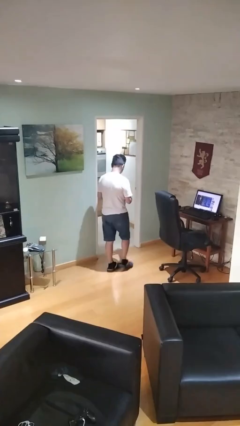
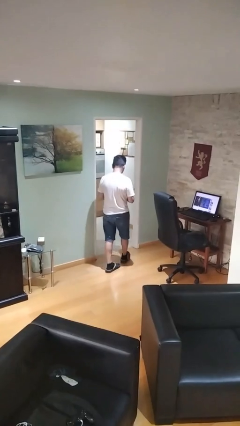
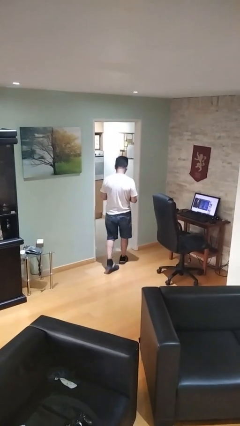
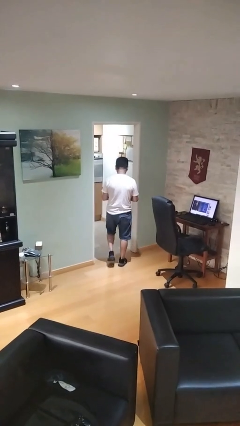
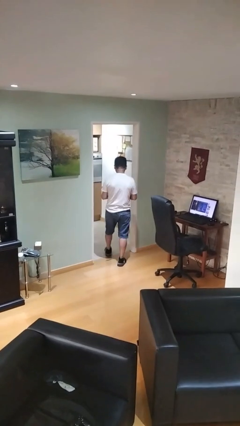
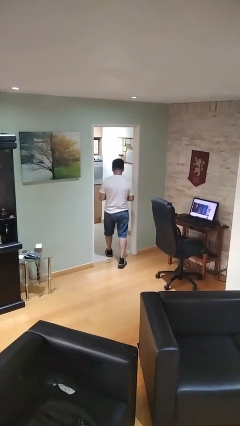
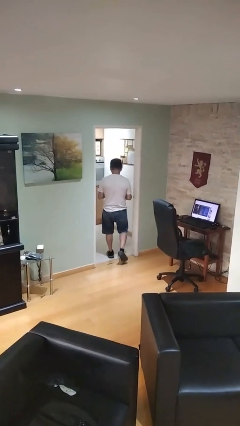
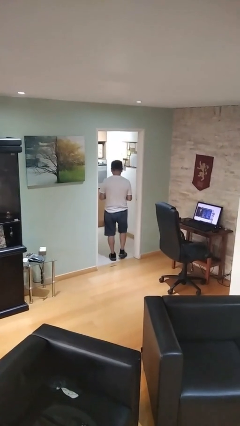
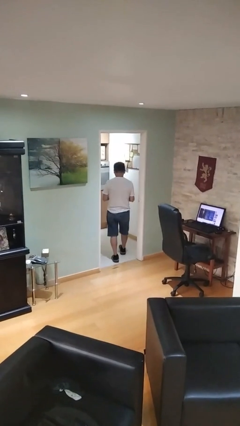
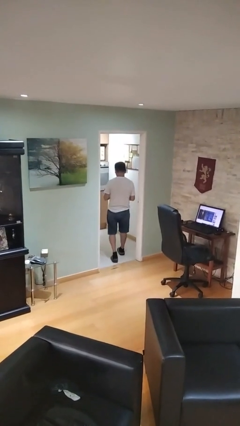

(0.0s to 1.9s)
person exits scene through structure

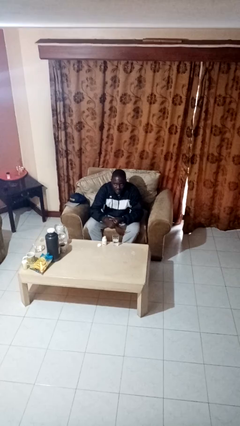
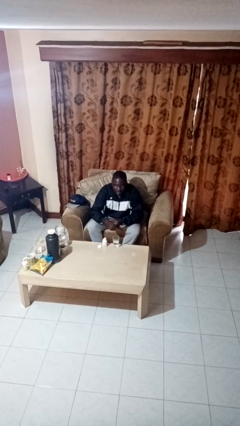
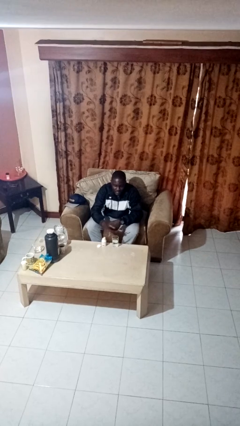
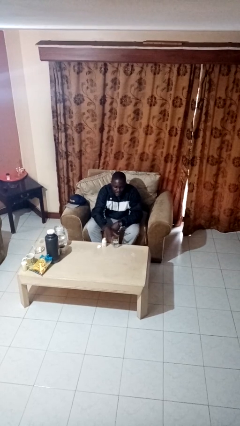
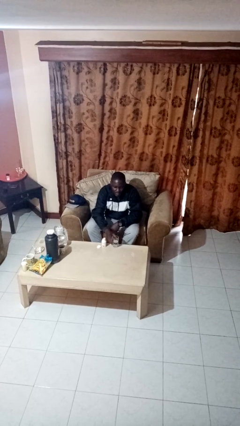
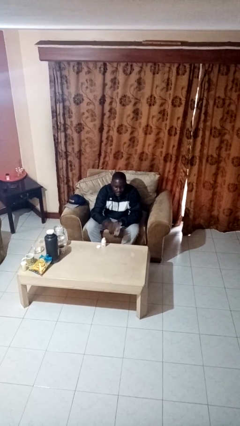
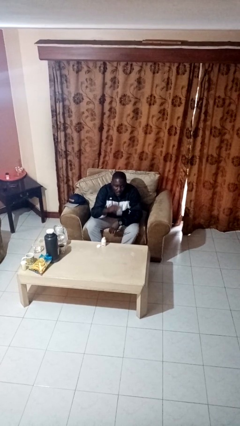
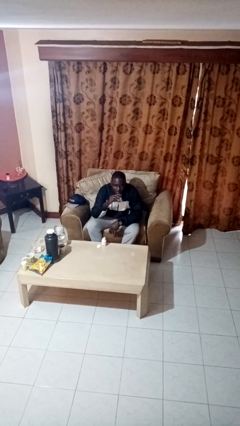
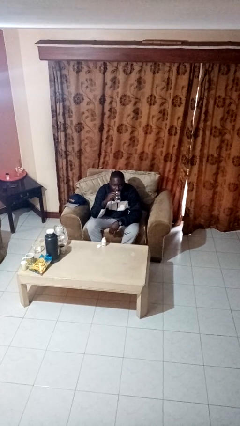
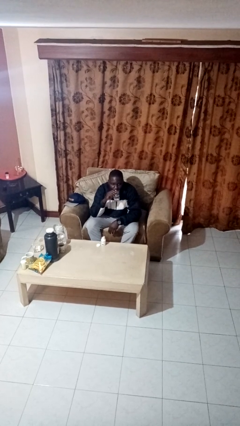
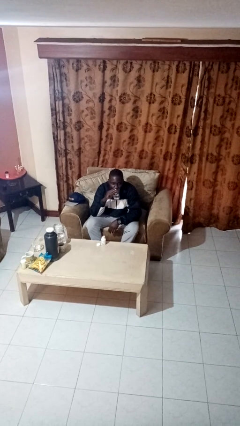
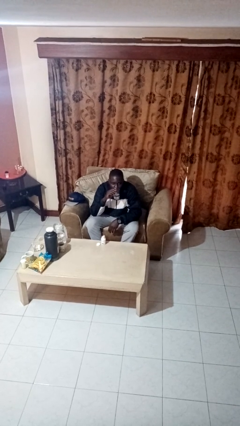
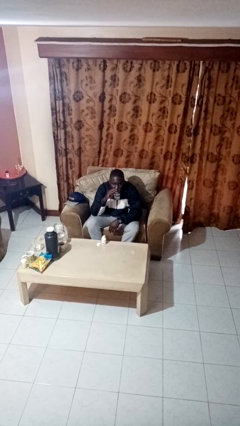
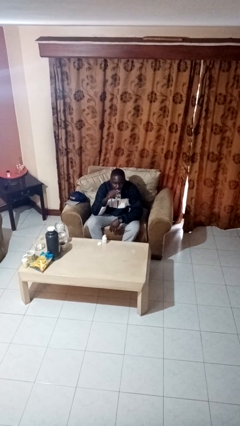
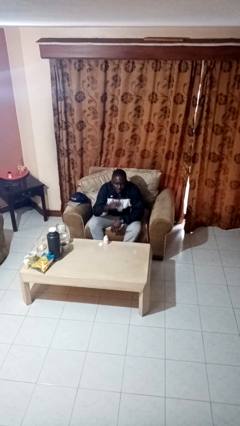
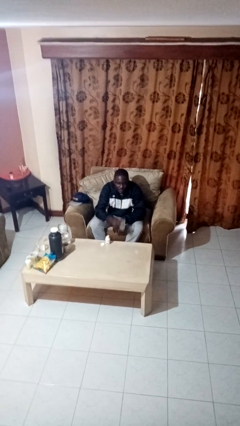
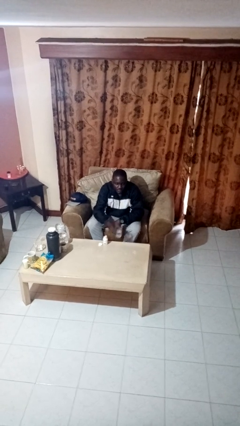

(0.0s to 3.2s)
person drinks from cup

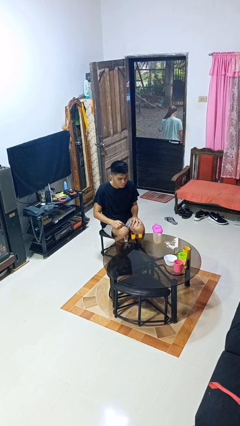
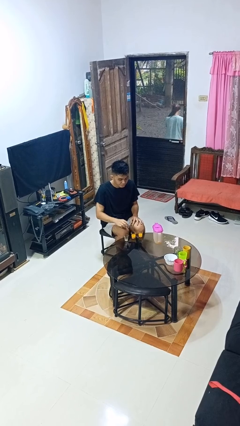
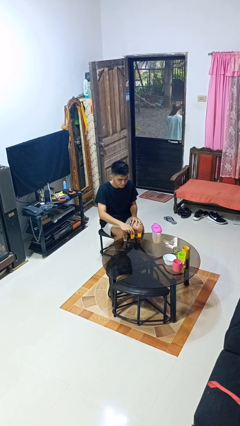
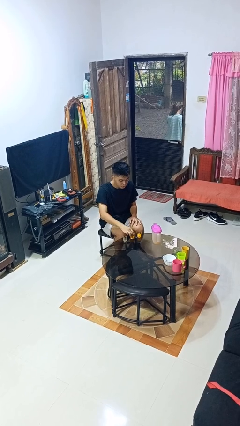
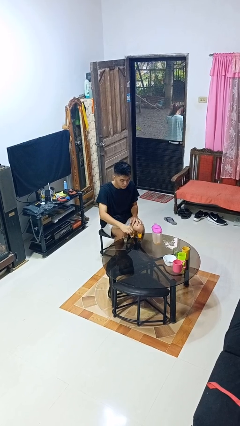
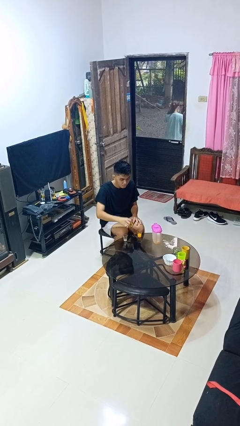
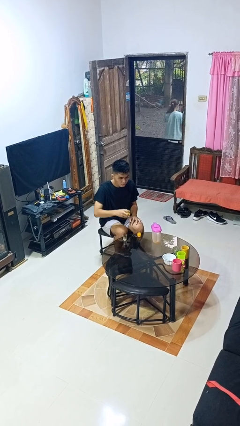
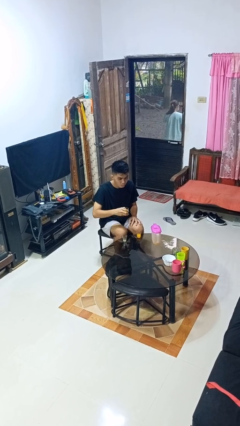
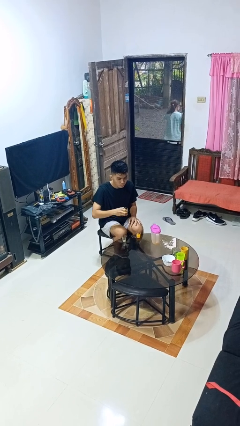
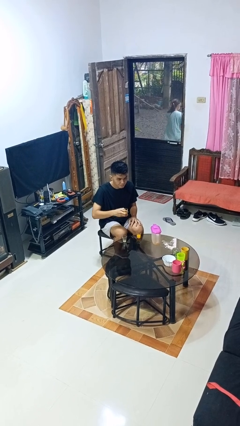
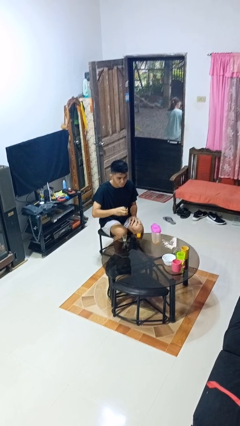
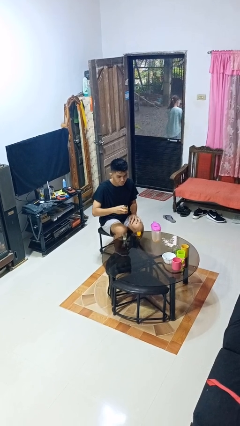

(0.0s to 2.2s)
person picks up object from table

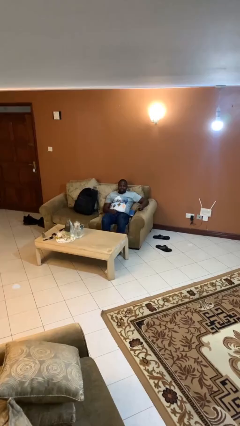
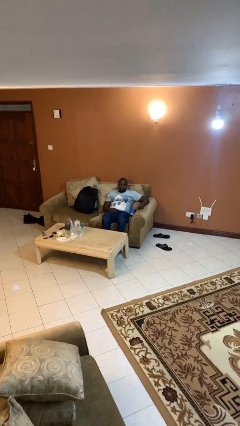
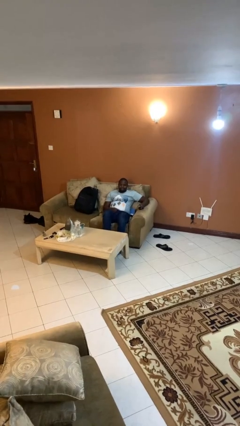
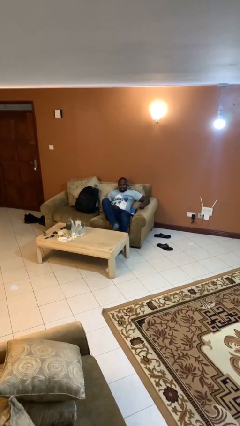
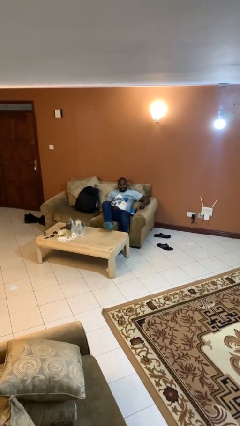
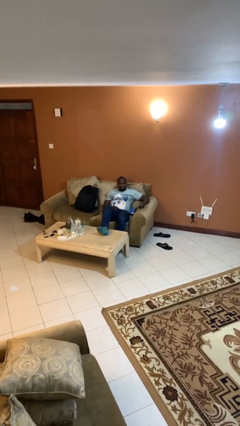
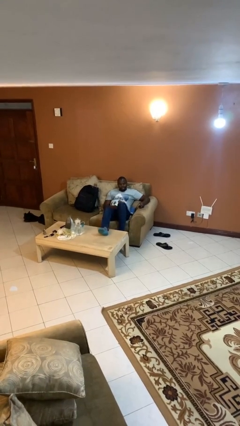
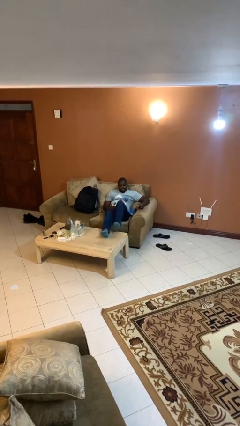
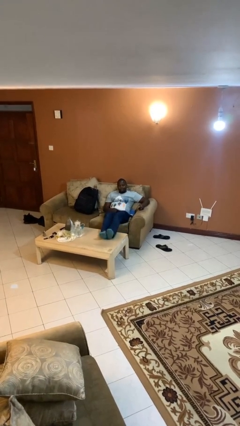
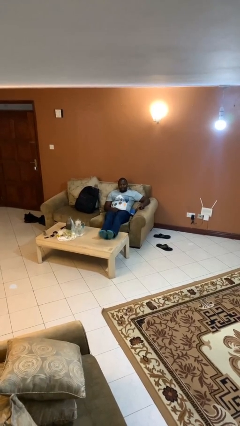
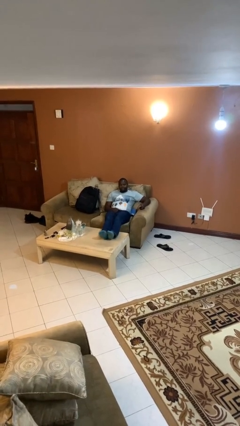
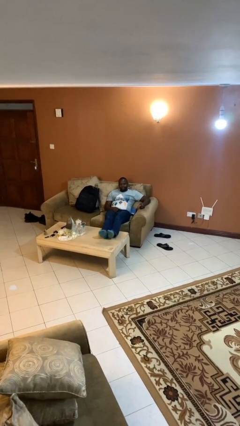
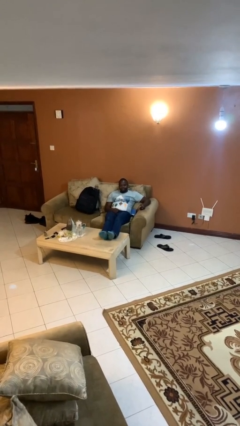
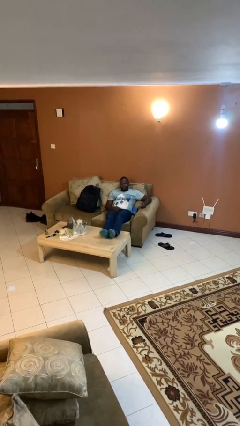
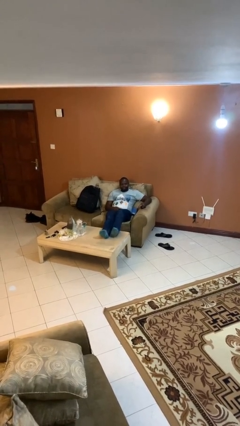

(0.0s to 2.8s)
person puts feet up

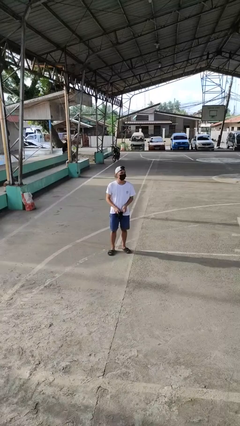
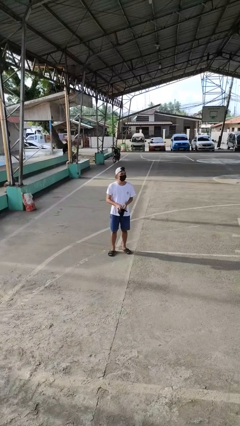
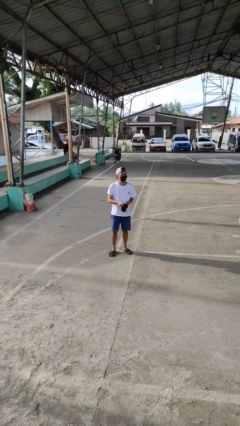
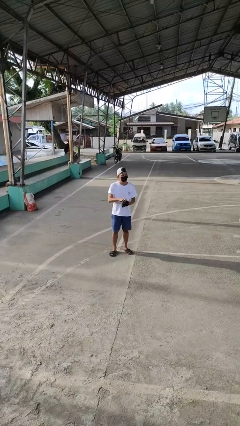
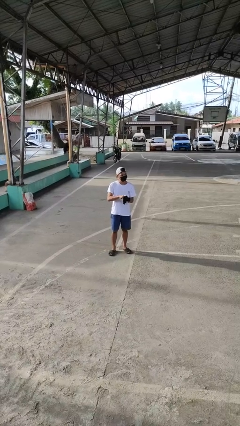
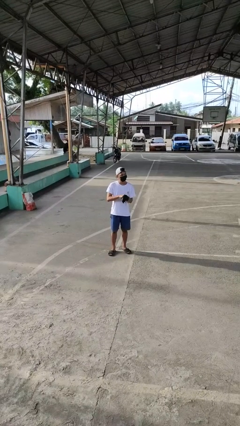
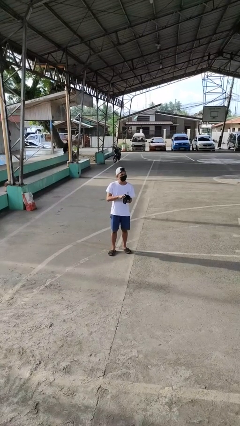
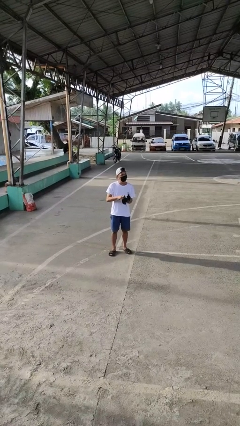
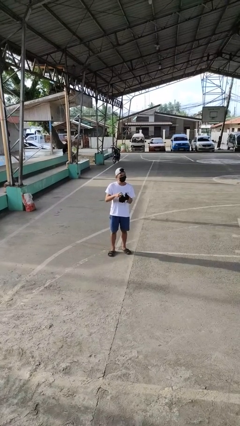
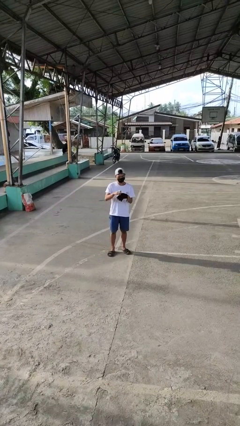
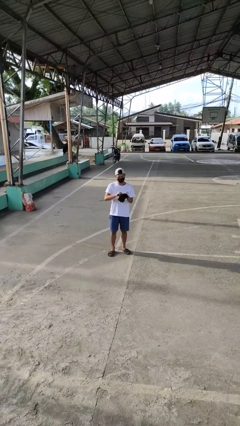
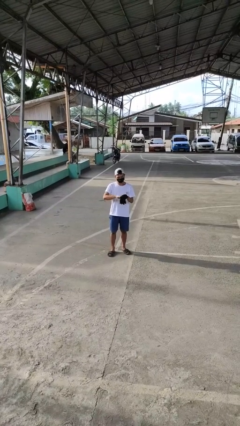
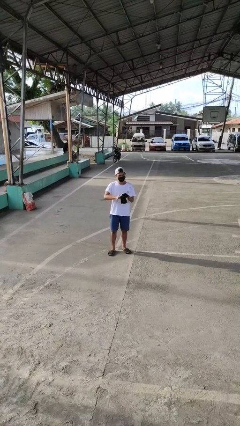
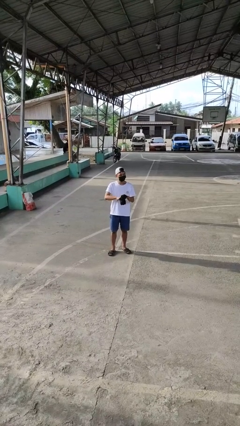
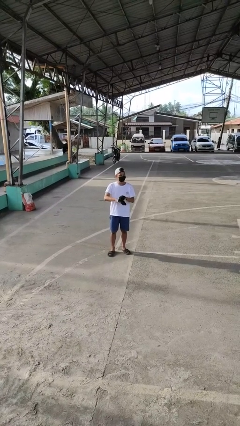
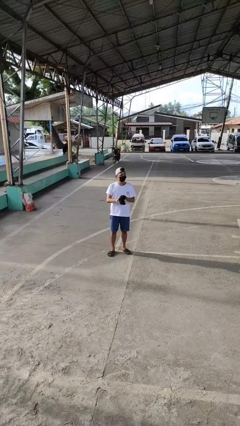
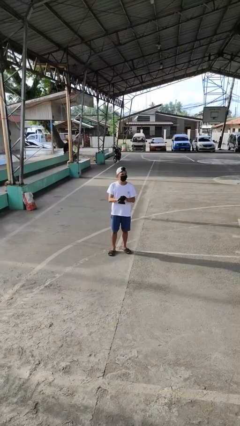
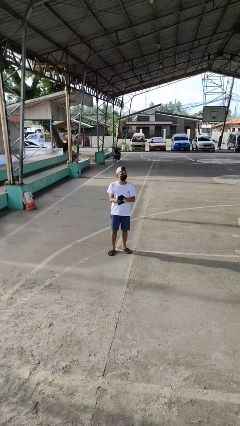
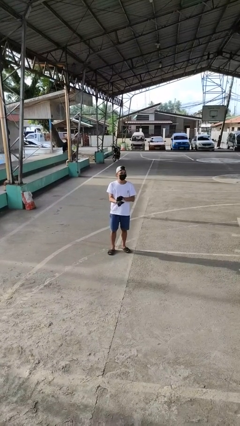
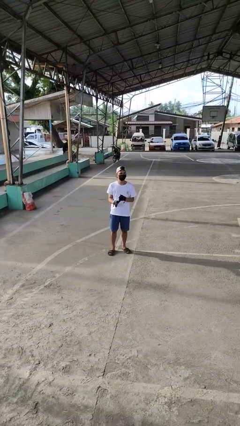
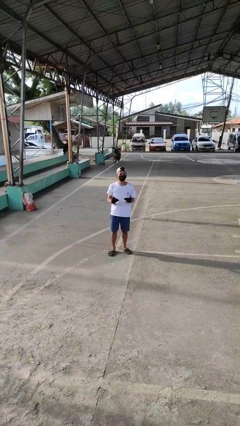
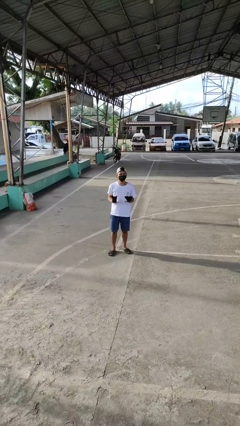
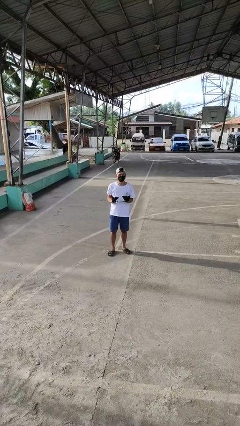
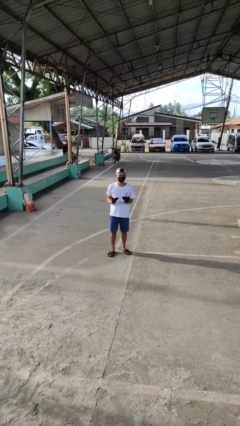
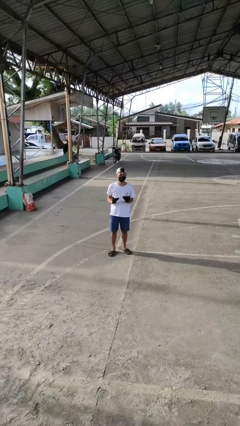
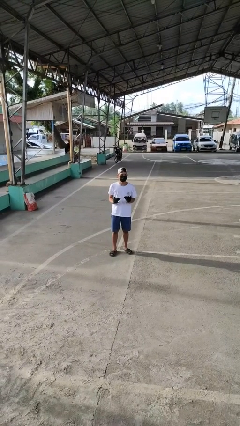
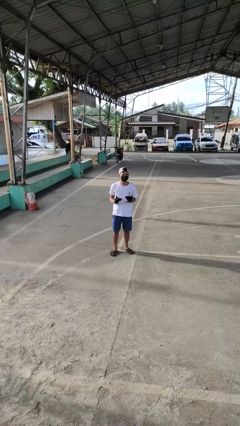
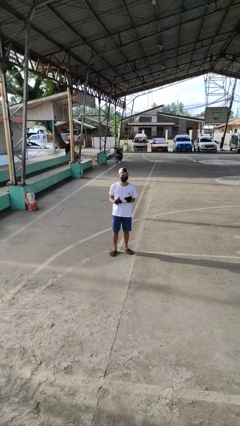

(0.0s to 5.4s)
person puts on gloves

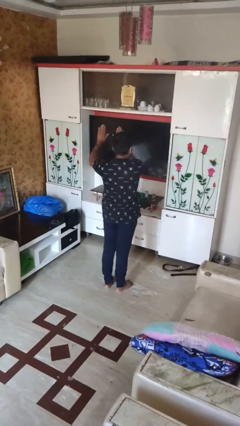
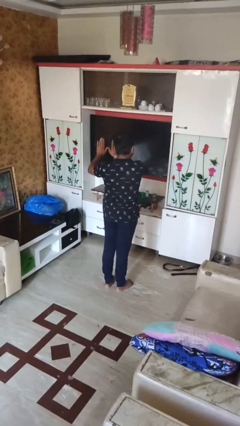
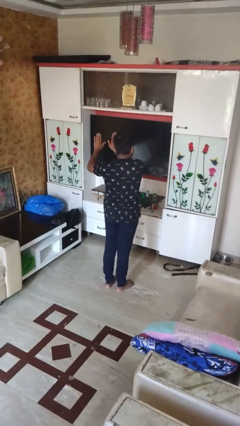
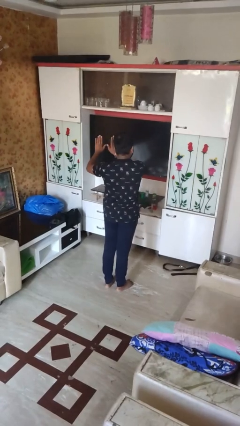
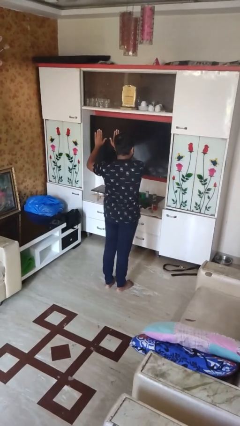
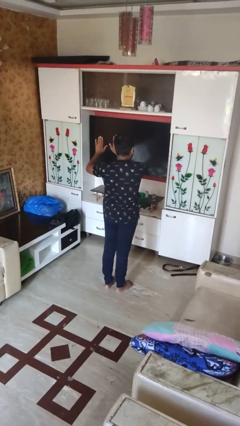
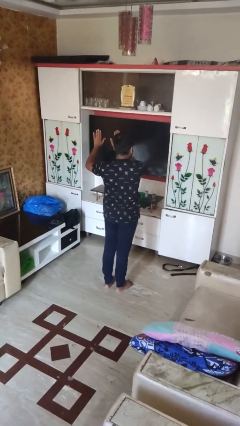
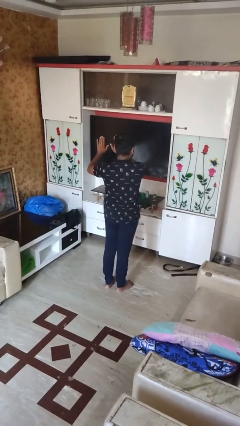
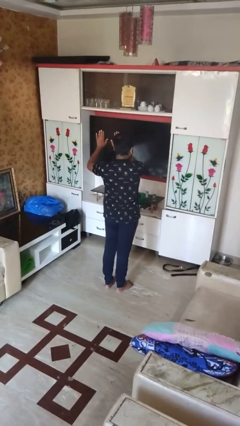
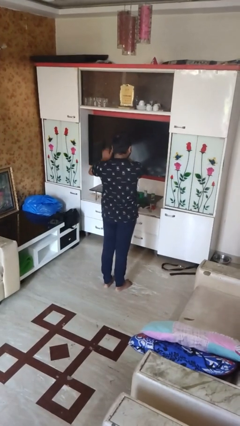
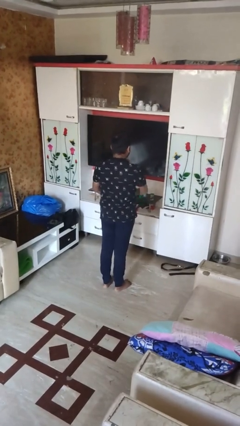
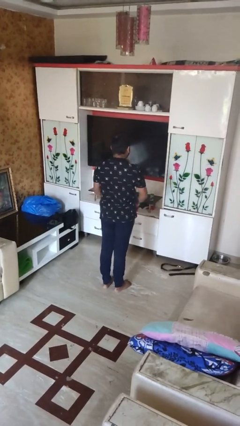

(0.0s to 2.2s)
person dances in place
